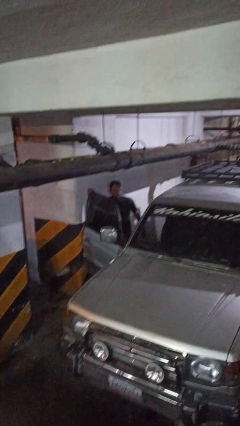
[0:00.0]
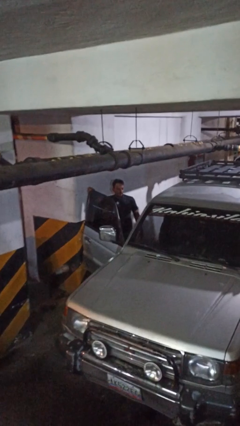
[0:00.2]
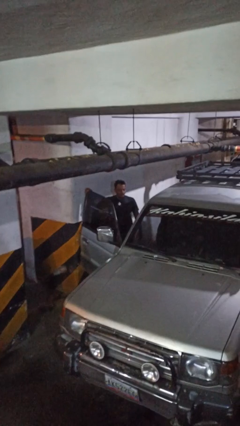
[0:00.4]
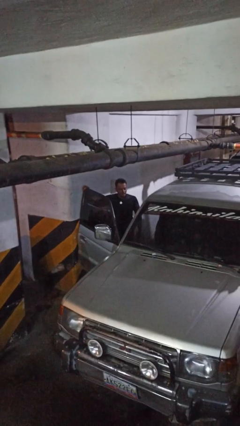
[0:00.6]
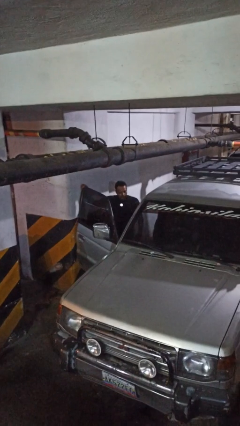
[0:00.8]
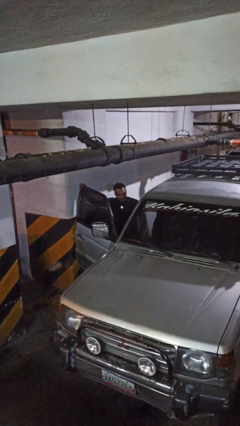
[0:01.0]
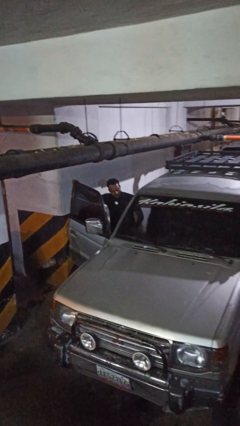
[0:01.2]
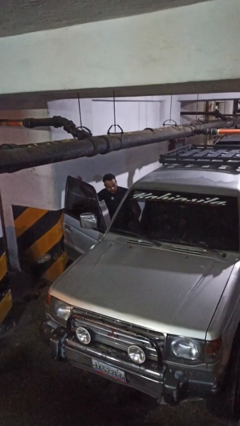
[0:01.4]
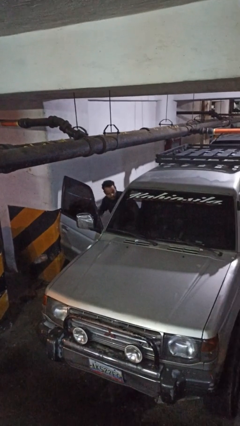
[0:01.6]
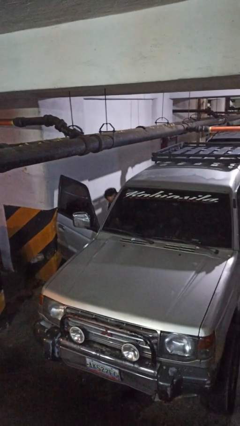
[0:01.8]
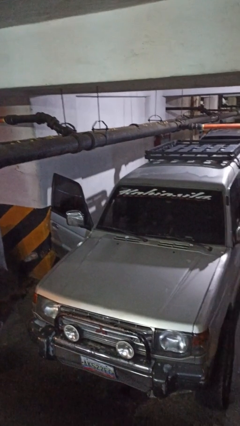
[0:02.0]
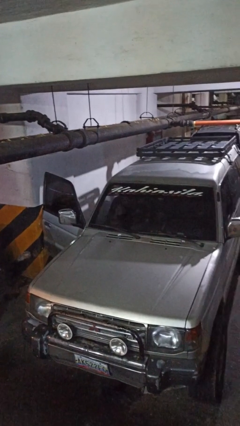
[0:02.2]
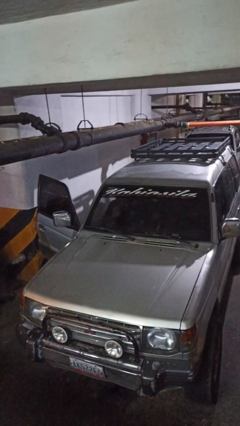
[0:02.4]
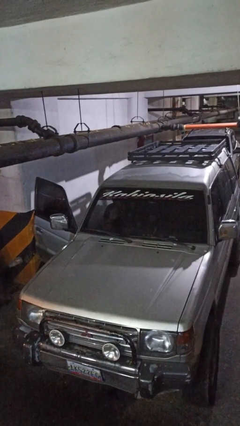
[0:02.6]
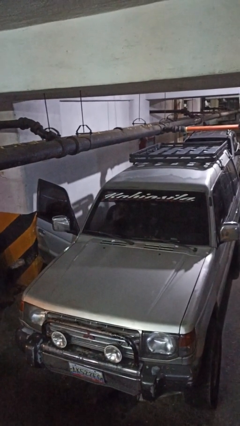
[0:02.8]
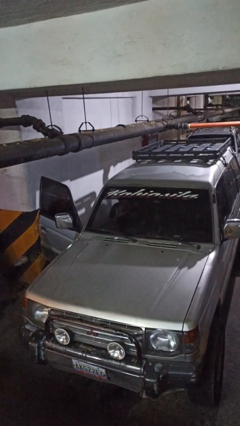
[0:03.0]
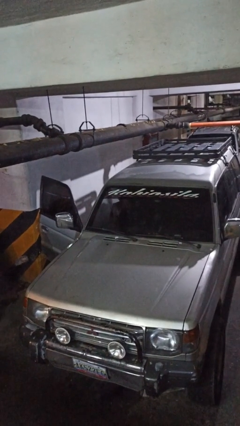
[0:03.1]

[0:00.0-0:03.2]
person enters car

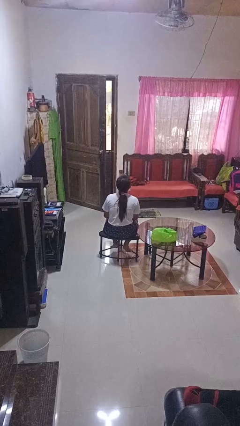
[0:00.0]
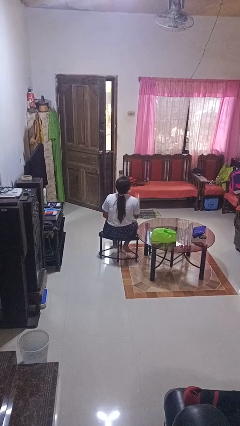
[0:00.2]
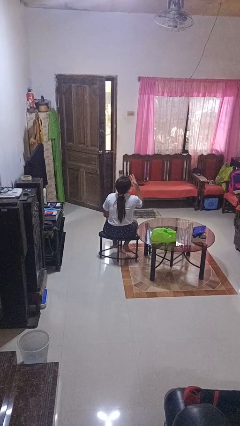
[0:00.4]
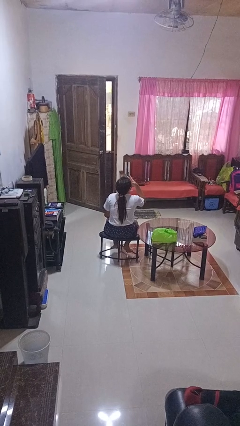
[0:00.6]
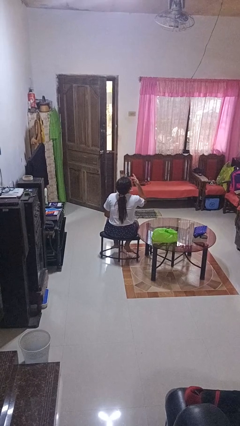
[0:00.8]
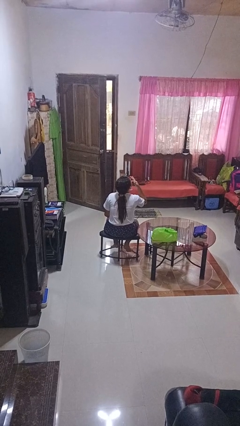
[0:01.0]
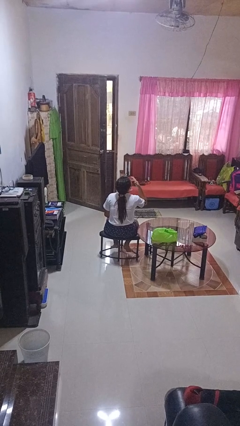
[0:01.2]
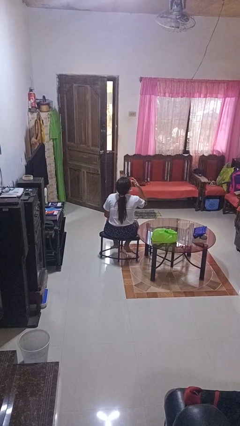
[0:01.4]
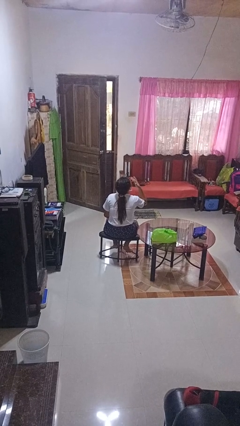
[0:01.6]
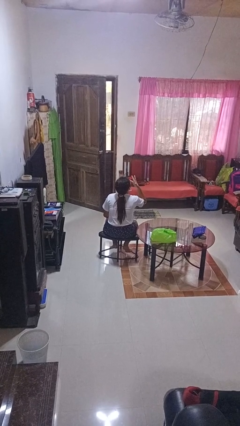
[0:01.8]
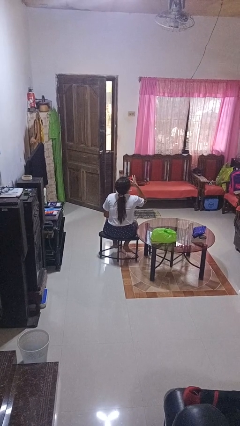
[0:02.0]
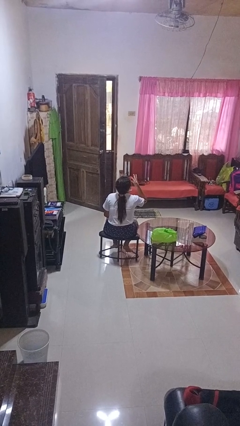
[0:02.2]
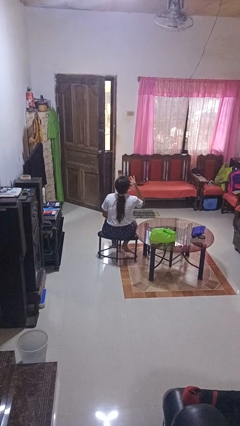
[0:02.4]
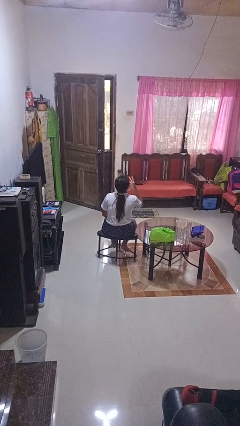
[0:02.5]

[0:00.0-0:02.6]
person licks fingers

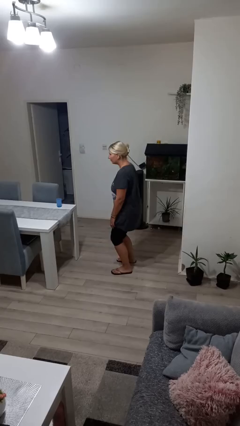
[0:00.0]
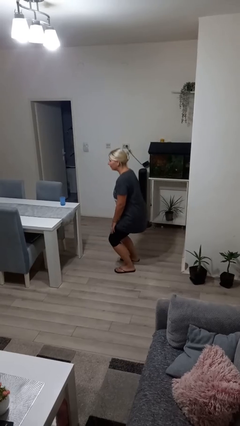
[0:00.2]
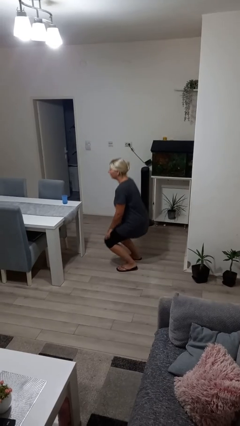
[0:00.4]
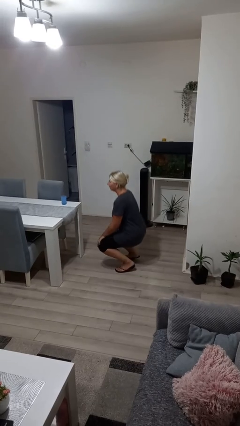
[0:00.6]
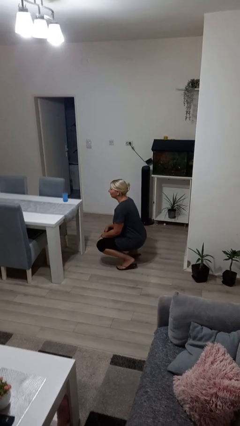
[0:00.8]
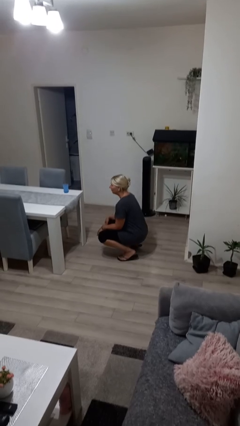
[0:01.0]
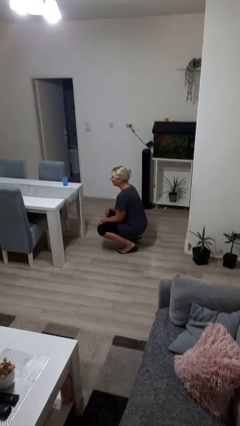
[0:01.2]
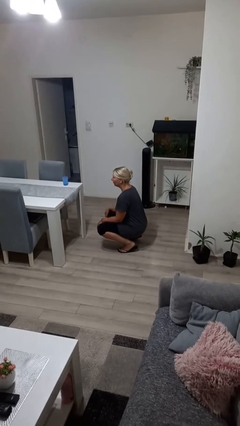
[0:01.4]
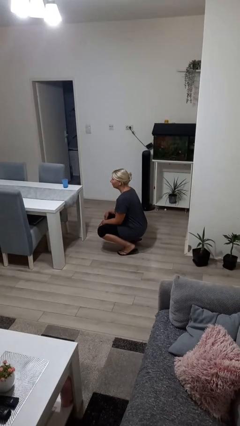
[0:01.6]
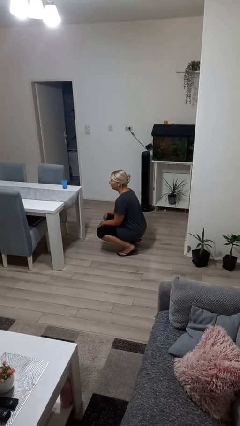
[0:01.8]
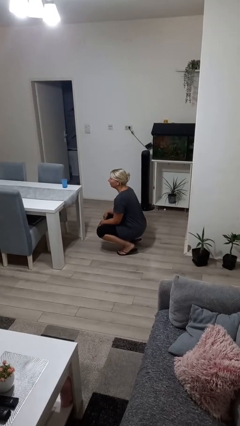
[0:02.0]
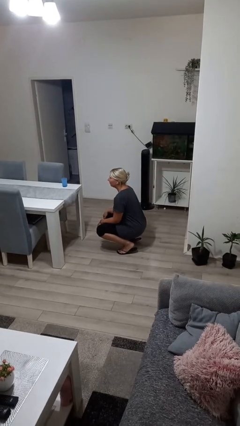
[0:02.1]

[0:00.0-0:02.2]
person squats

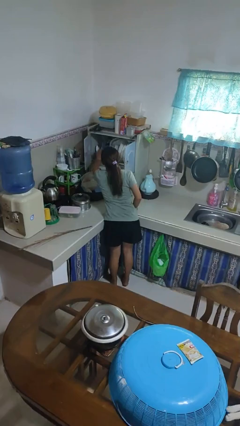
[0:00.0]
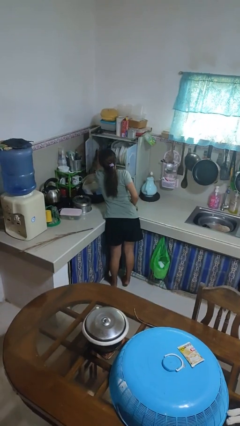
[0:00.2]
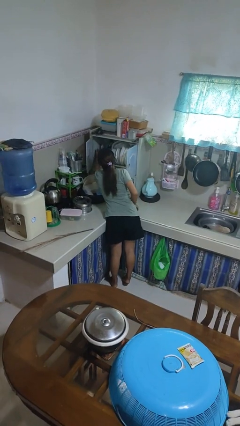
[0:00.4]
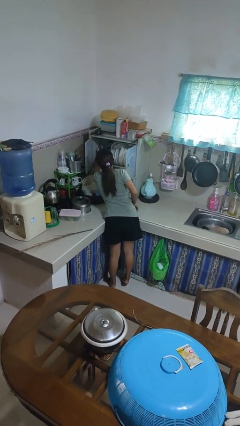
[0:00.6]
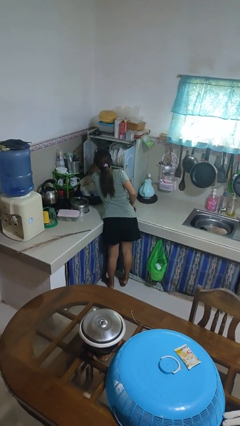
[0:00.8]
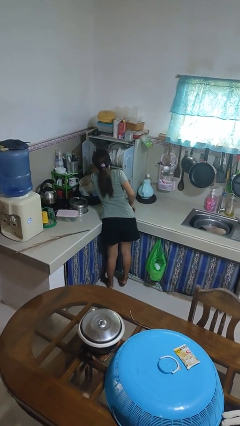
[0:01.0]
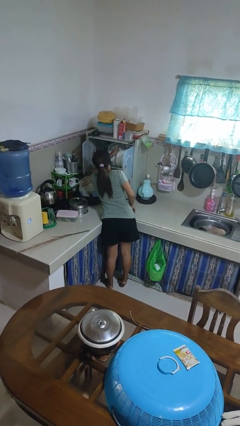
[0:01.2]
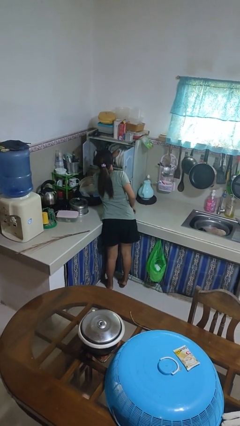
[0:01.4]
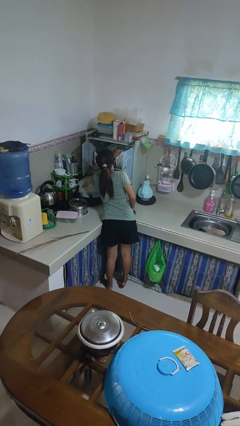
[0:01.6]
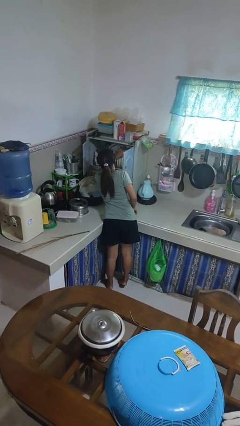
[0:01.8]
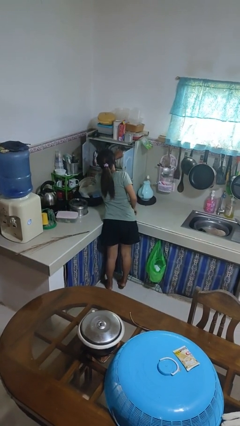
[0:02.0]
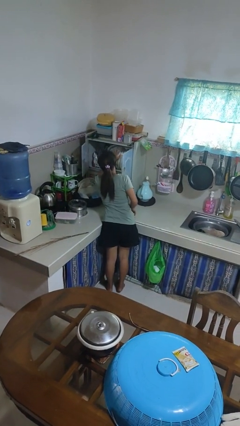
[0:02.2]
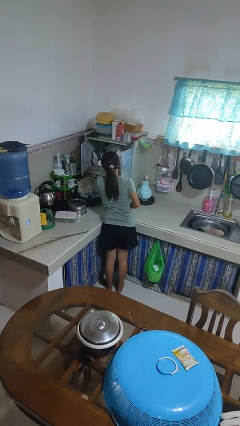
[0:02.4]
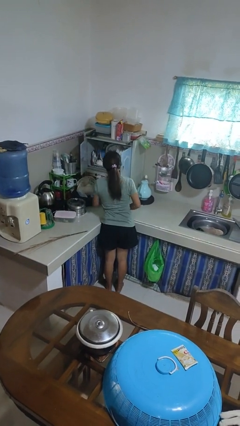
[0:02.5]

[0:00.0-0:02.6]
person searches in kitchen drawer

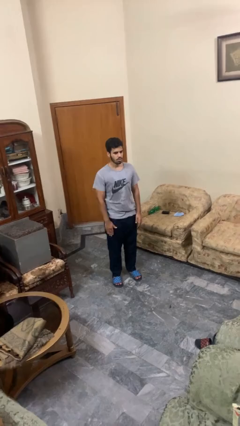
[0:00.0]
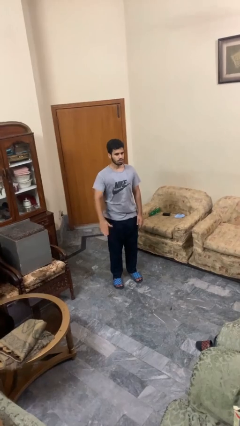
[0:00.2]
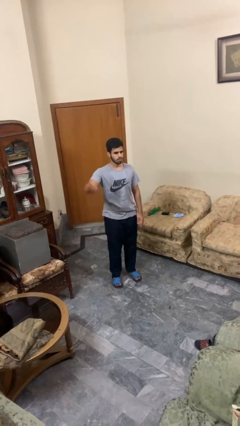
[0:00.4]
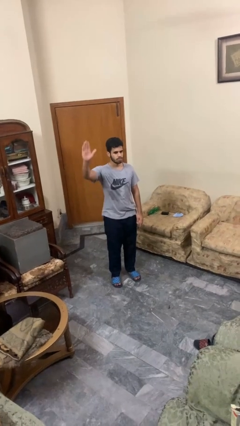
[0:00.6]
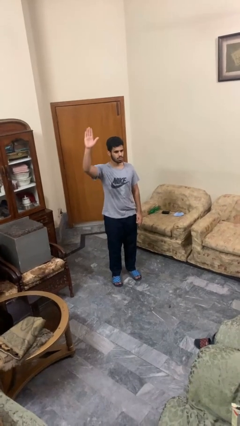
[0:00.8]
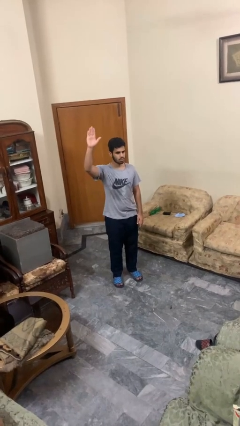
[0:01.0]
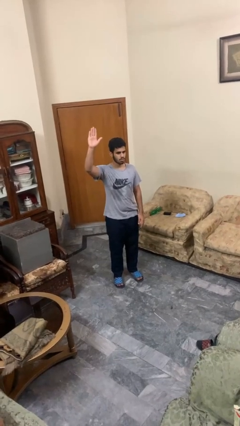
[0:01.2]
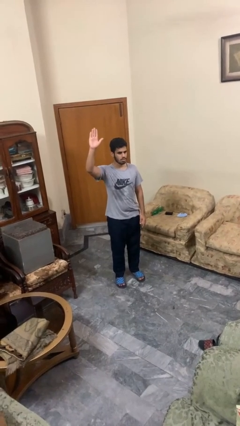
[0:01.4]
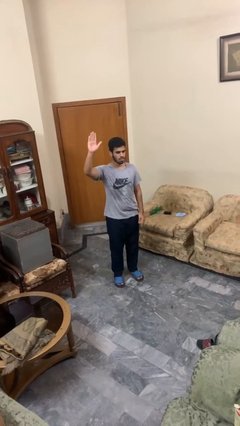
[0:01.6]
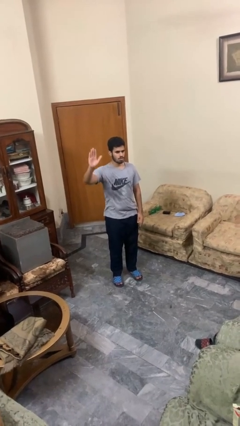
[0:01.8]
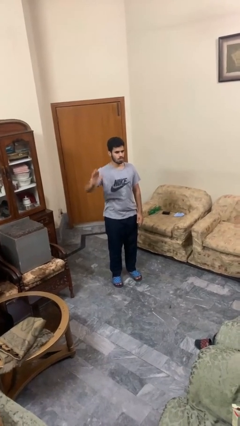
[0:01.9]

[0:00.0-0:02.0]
person gestures raise hand

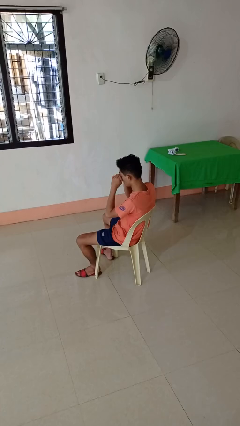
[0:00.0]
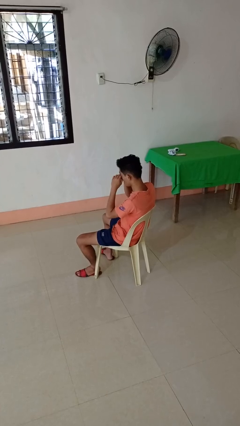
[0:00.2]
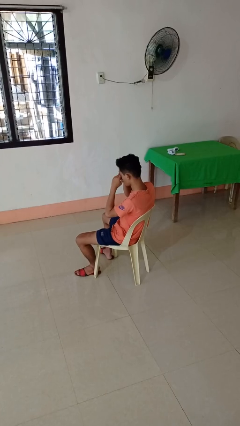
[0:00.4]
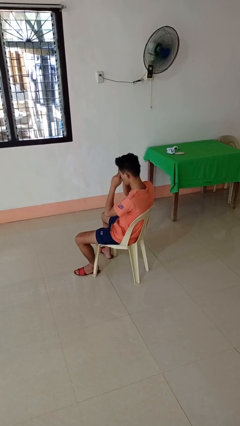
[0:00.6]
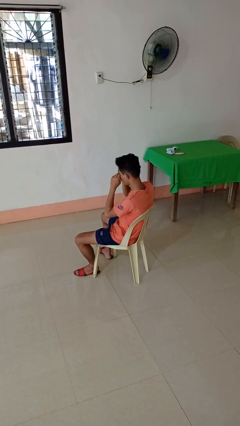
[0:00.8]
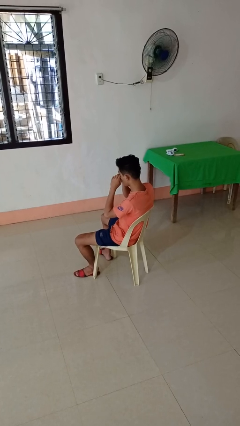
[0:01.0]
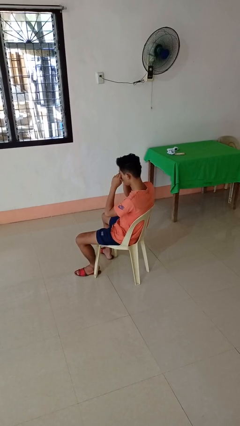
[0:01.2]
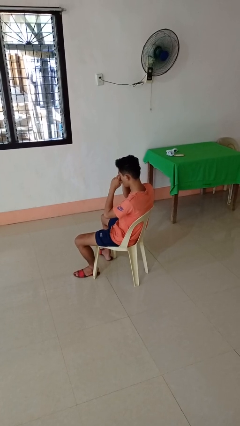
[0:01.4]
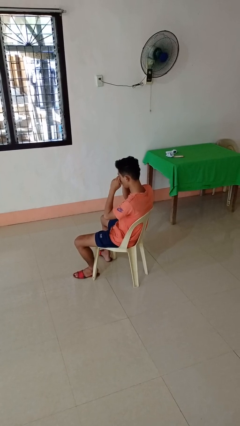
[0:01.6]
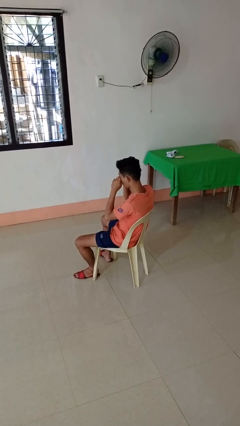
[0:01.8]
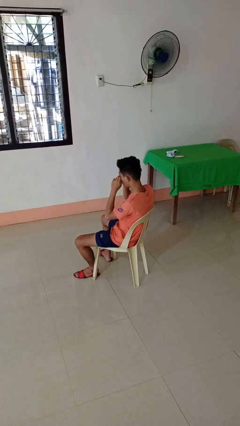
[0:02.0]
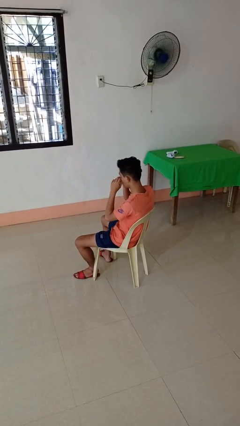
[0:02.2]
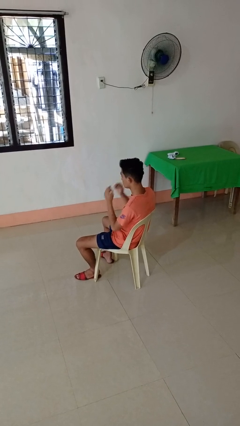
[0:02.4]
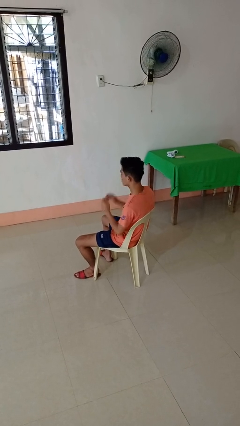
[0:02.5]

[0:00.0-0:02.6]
person rubs eyes

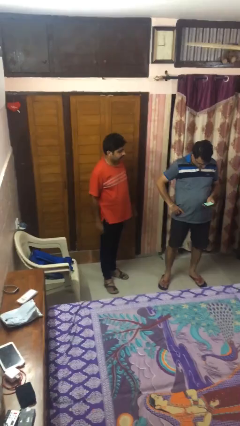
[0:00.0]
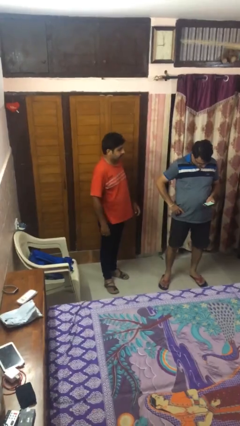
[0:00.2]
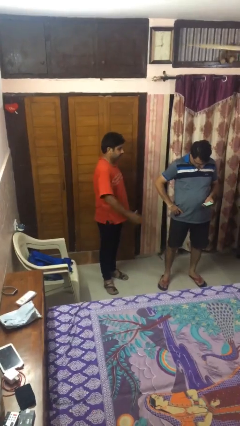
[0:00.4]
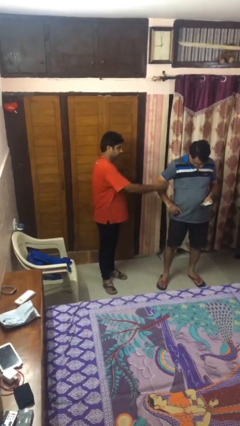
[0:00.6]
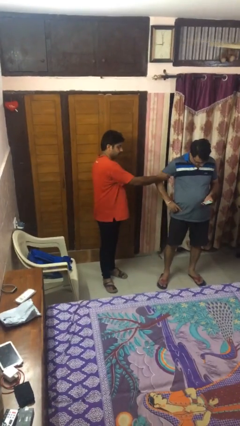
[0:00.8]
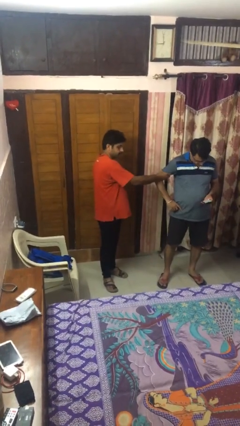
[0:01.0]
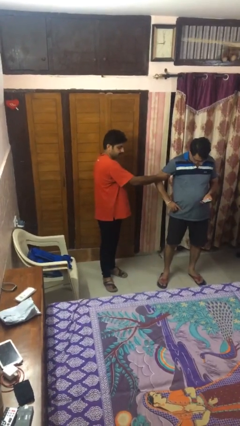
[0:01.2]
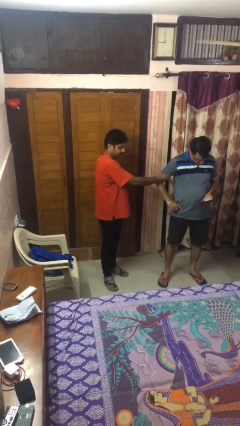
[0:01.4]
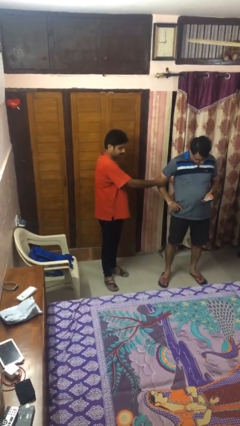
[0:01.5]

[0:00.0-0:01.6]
person grabs person by bicep
